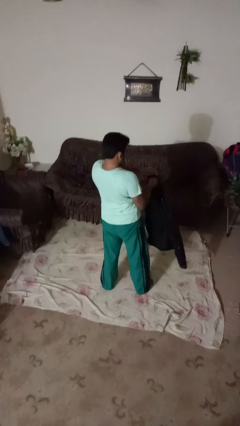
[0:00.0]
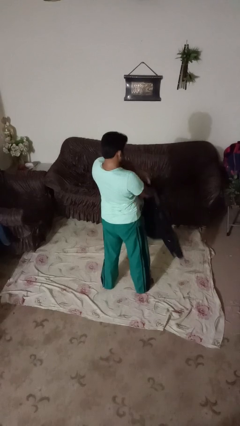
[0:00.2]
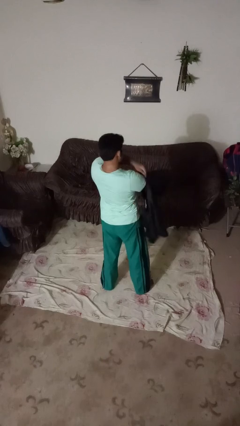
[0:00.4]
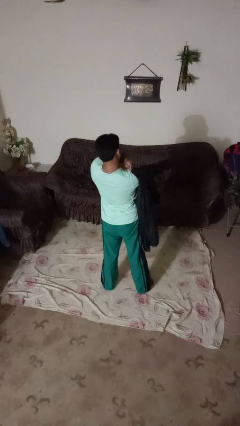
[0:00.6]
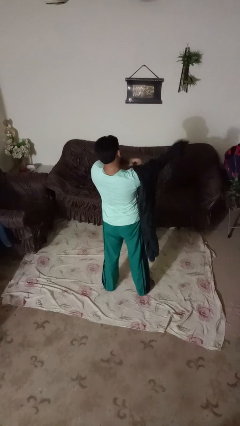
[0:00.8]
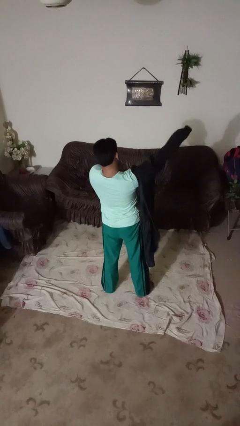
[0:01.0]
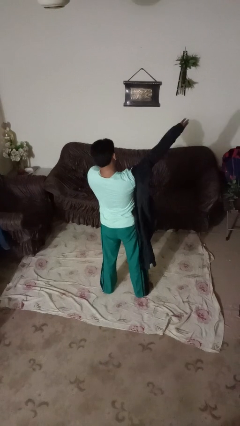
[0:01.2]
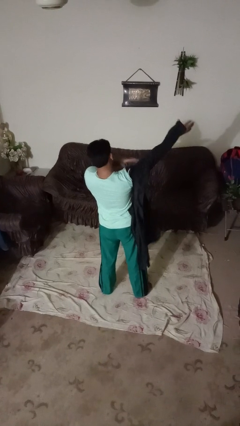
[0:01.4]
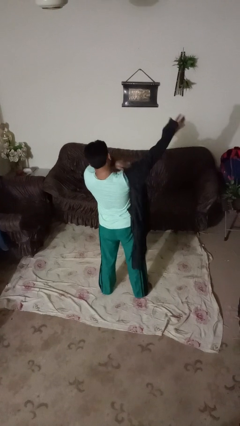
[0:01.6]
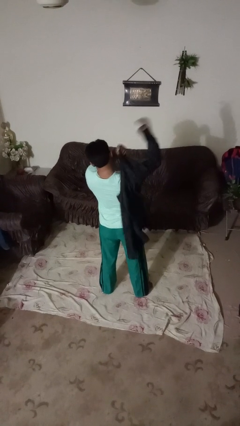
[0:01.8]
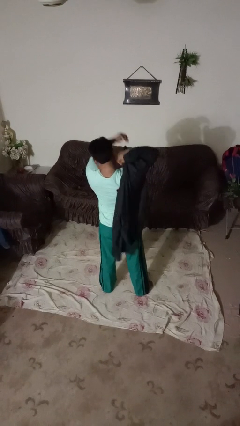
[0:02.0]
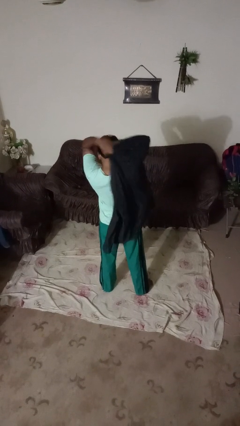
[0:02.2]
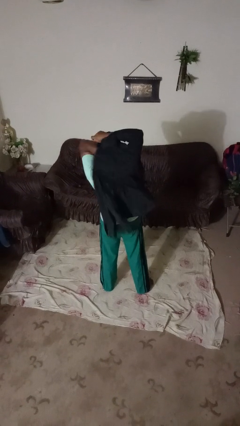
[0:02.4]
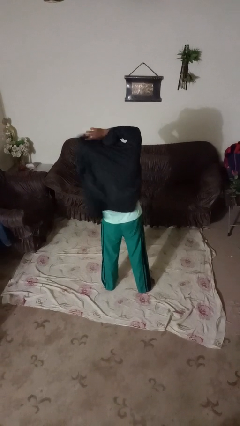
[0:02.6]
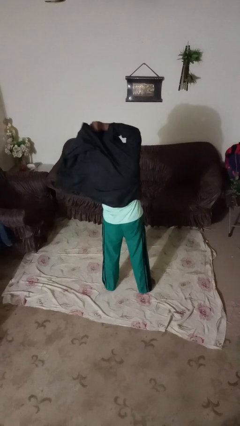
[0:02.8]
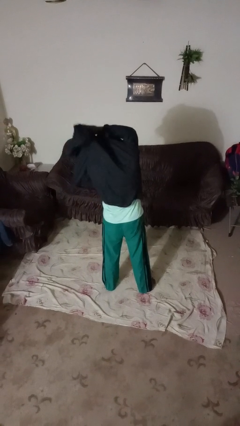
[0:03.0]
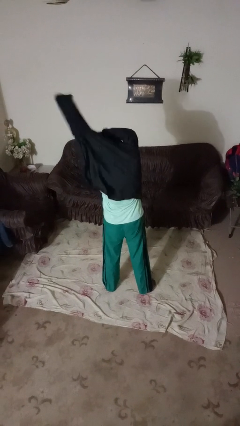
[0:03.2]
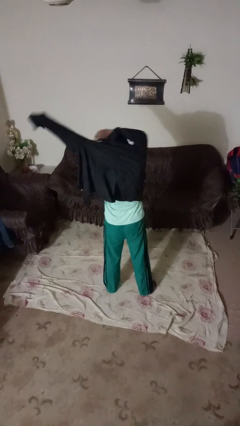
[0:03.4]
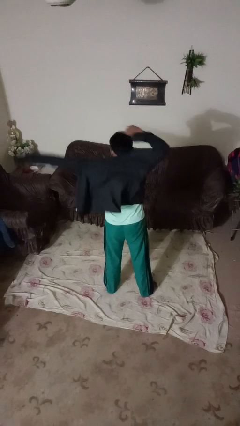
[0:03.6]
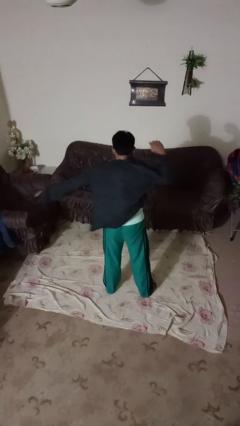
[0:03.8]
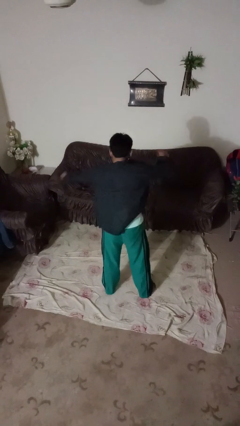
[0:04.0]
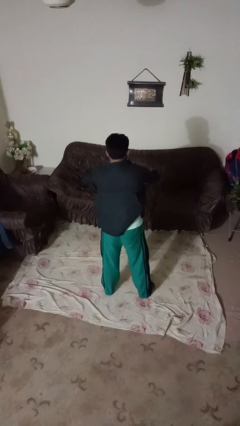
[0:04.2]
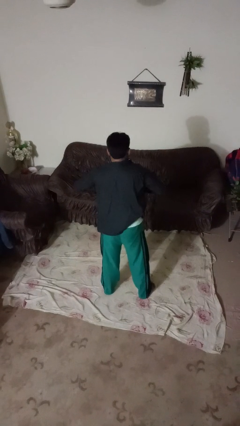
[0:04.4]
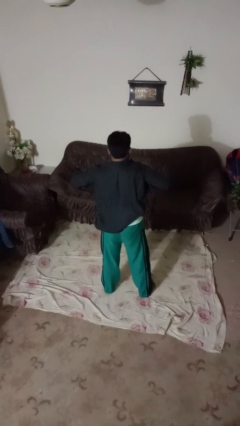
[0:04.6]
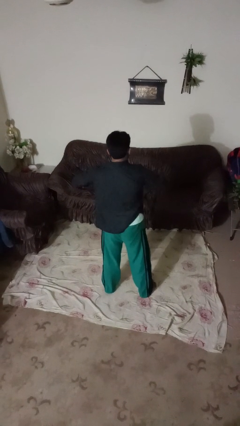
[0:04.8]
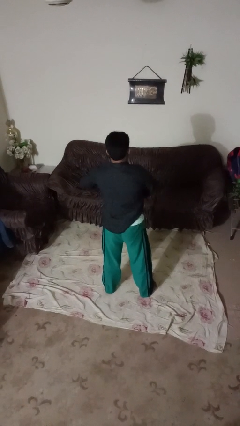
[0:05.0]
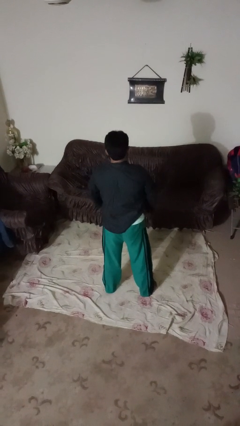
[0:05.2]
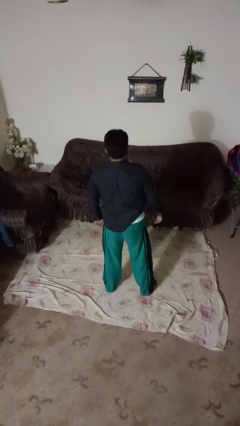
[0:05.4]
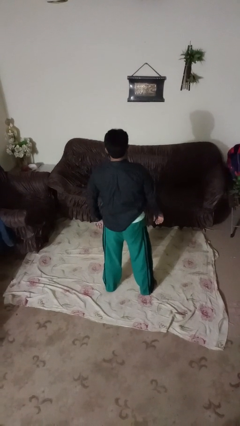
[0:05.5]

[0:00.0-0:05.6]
person puts on shirt

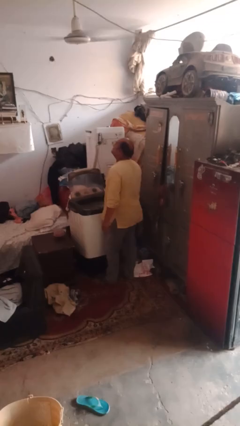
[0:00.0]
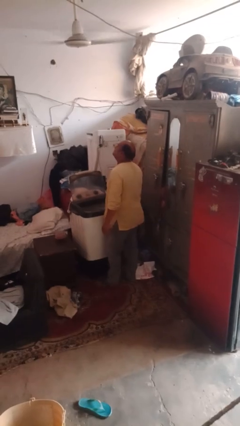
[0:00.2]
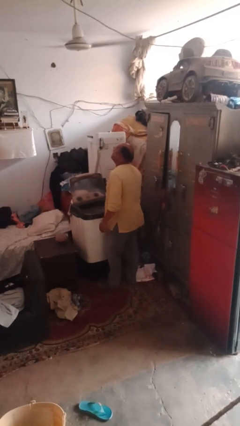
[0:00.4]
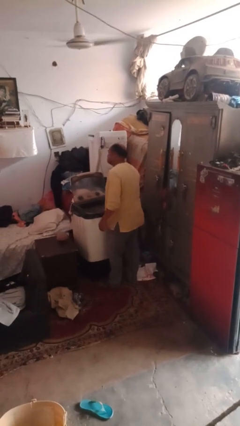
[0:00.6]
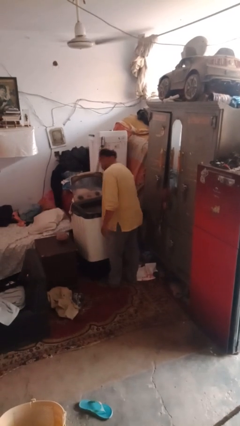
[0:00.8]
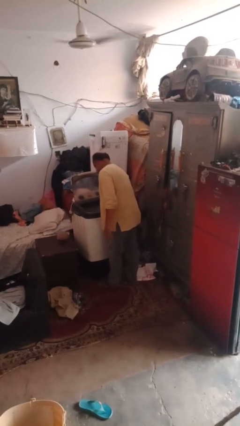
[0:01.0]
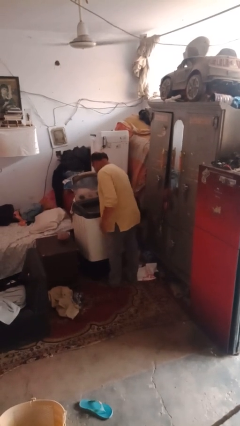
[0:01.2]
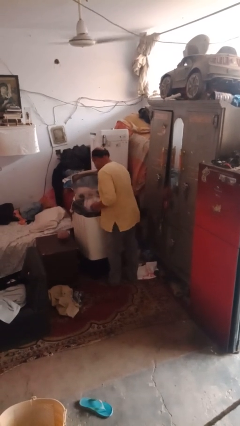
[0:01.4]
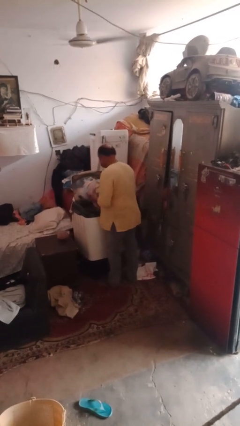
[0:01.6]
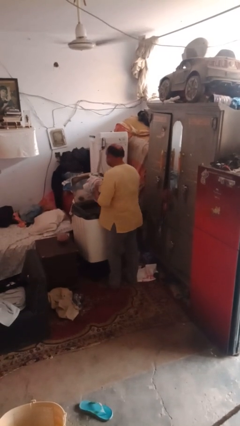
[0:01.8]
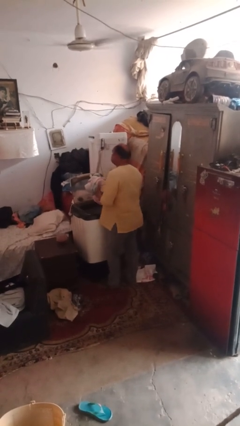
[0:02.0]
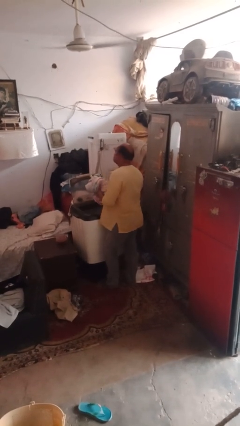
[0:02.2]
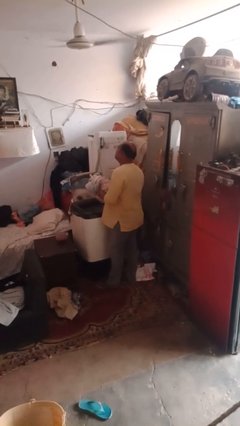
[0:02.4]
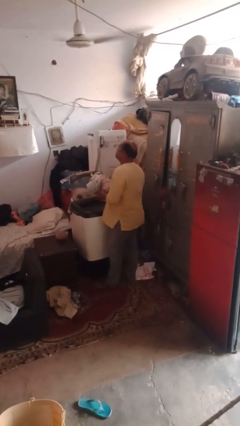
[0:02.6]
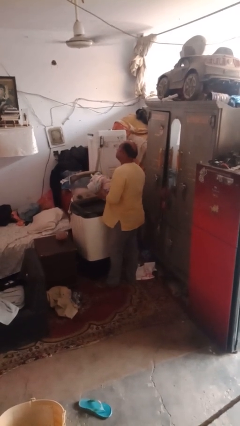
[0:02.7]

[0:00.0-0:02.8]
person unloads clotheswasher

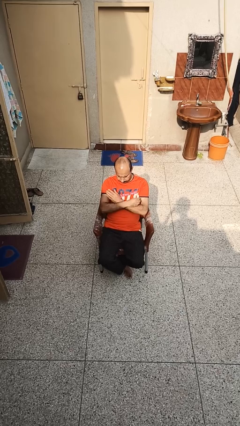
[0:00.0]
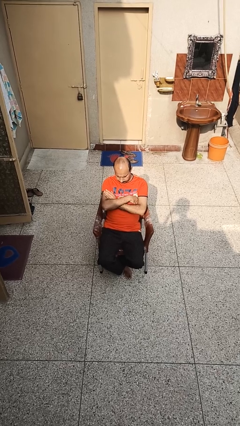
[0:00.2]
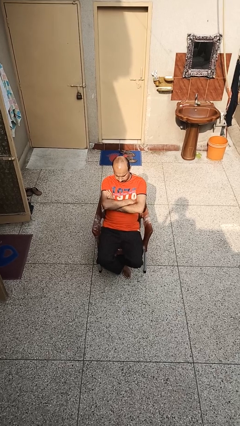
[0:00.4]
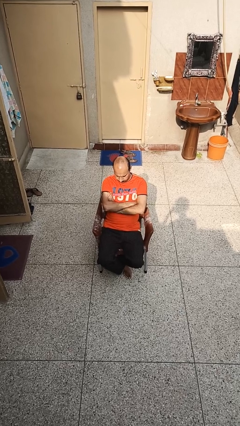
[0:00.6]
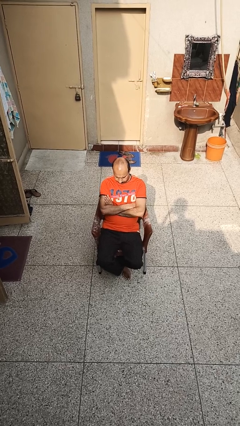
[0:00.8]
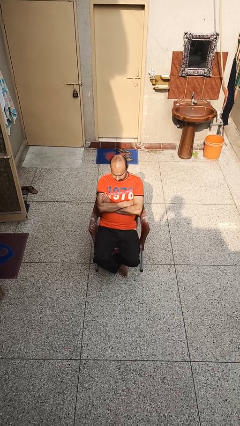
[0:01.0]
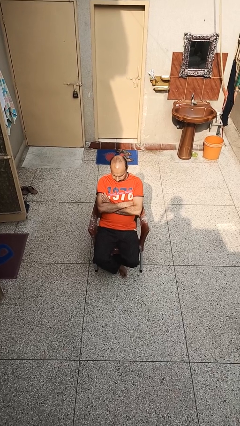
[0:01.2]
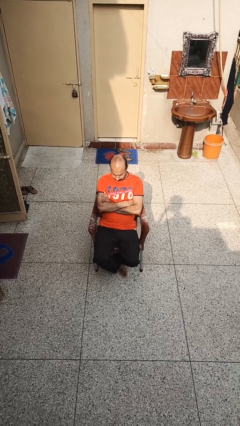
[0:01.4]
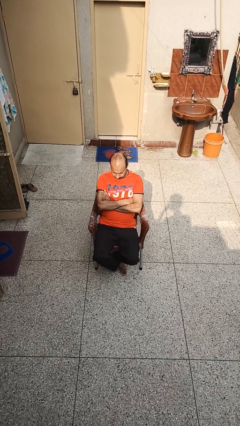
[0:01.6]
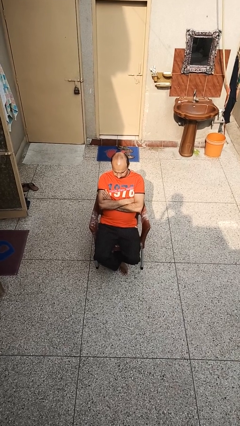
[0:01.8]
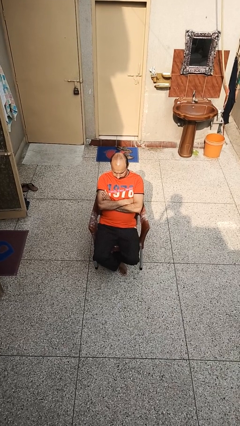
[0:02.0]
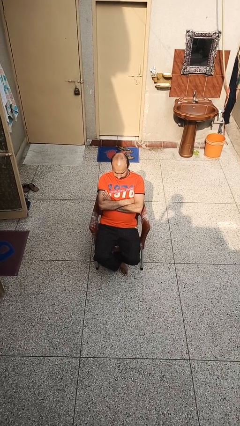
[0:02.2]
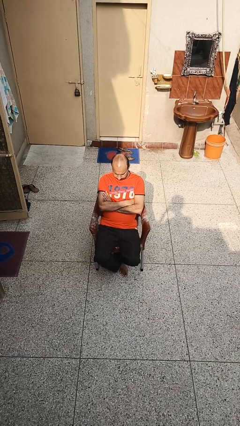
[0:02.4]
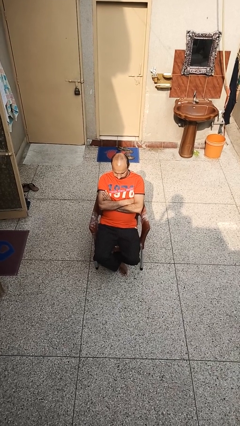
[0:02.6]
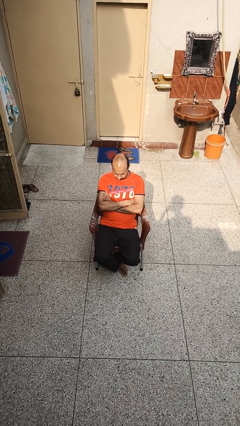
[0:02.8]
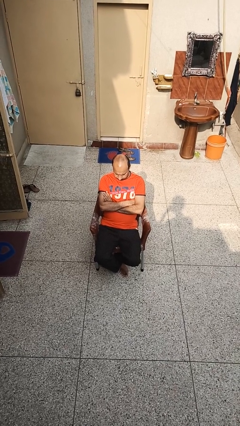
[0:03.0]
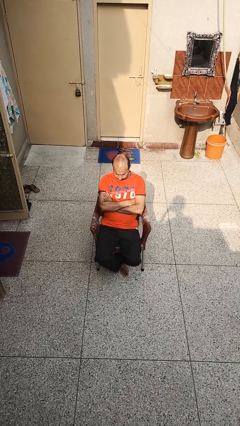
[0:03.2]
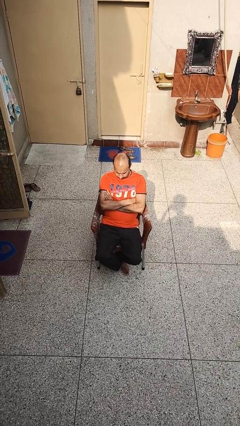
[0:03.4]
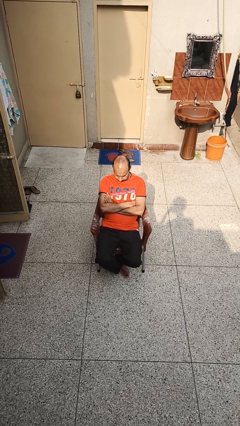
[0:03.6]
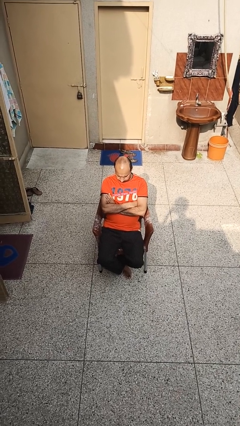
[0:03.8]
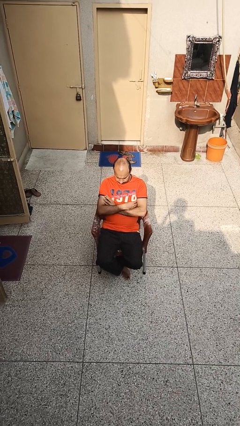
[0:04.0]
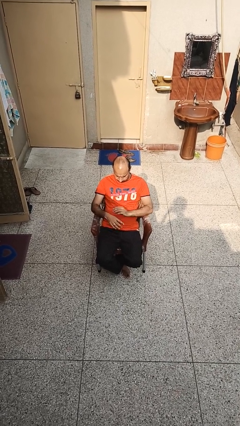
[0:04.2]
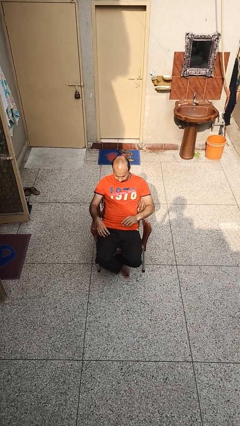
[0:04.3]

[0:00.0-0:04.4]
person crosses arms

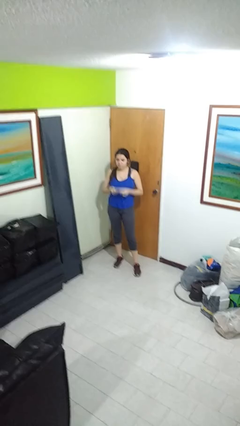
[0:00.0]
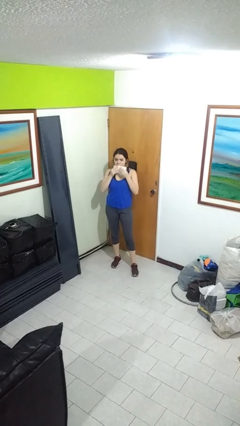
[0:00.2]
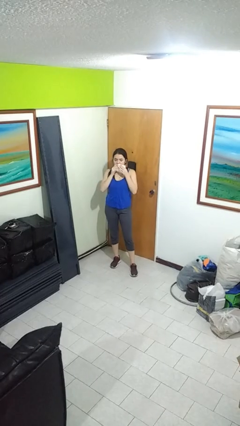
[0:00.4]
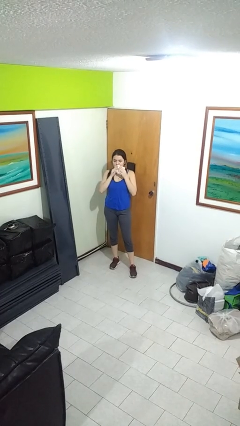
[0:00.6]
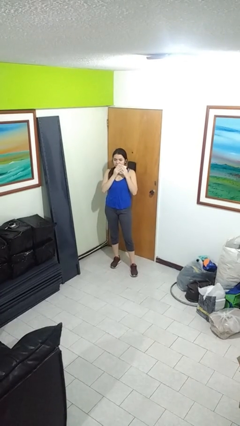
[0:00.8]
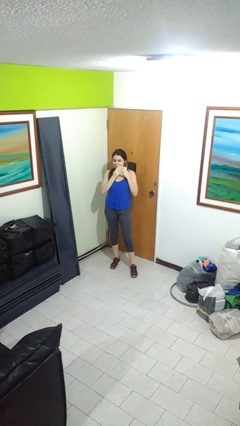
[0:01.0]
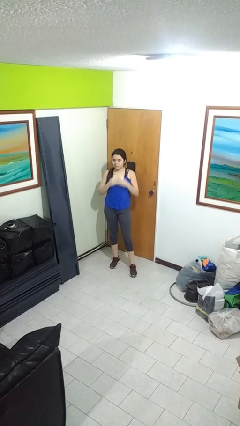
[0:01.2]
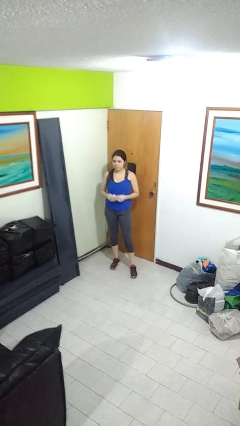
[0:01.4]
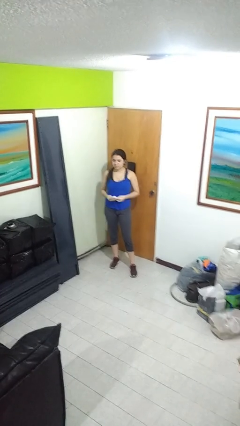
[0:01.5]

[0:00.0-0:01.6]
person wipes mouth with napkin

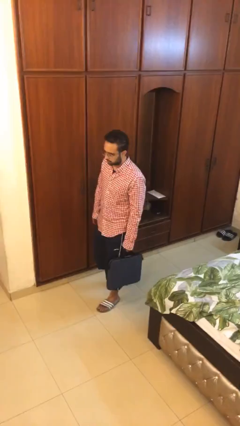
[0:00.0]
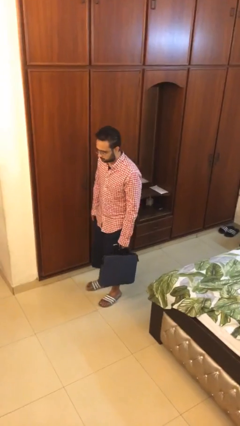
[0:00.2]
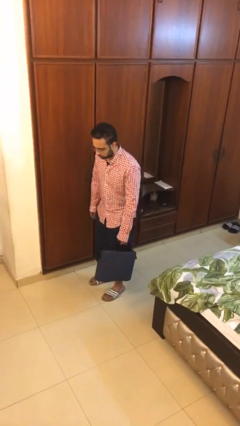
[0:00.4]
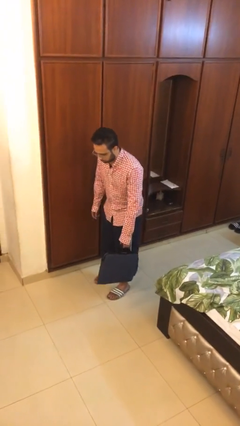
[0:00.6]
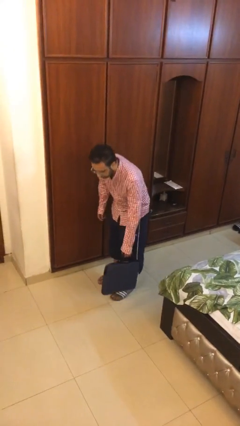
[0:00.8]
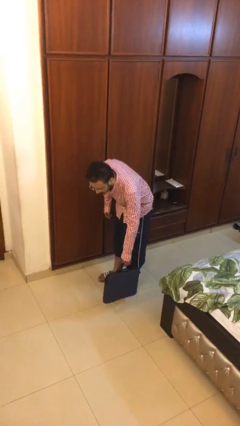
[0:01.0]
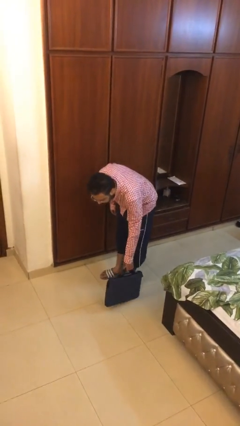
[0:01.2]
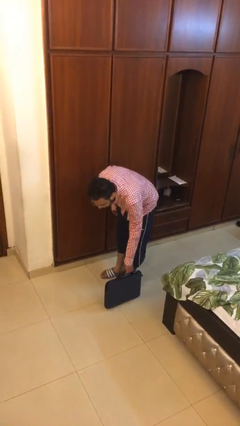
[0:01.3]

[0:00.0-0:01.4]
person puts down object on floor

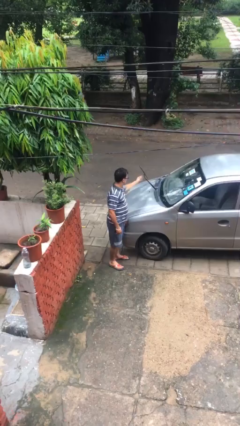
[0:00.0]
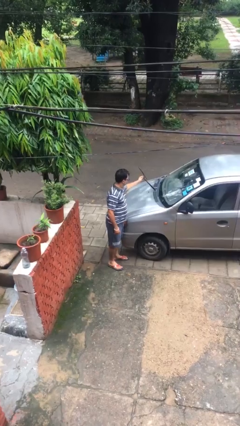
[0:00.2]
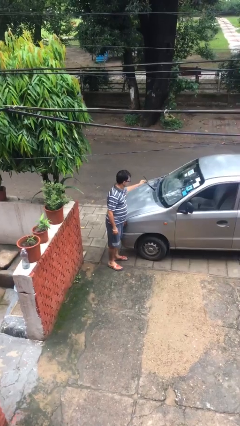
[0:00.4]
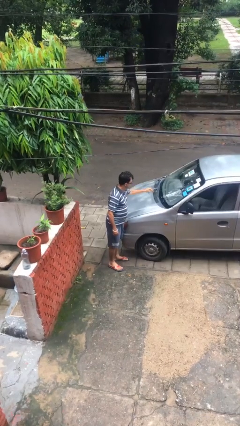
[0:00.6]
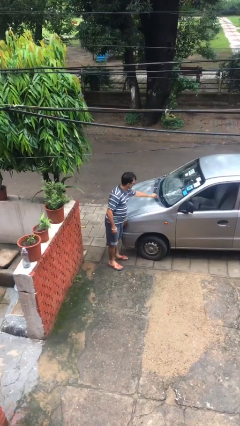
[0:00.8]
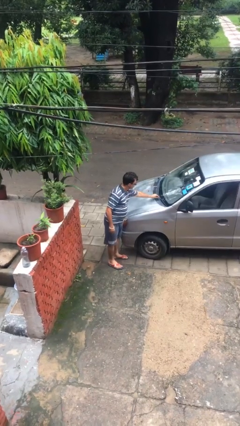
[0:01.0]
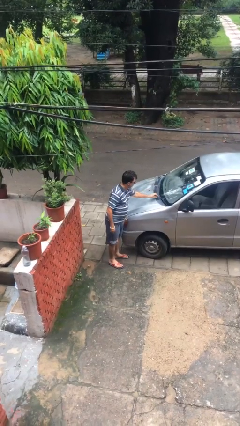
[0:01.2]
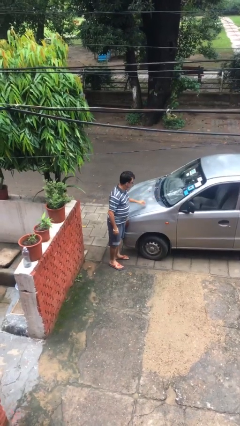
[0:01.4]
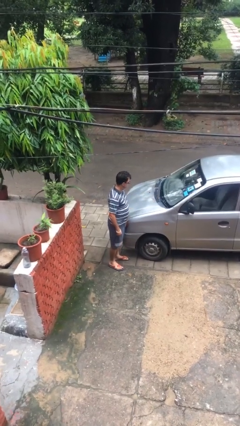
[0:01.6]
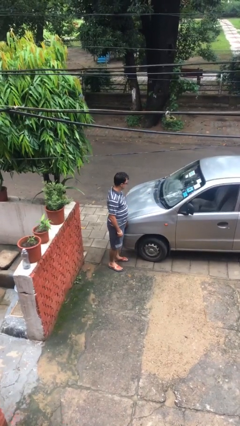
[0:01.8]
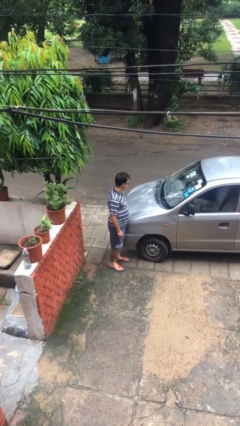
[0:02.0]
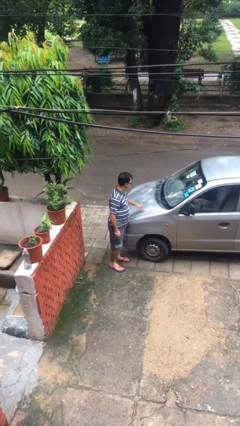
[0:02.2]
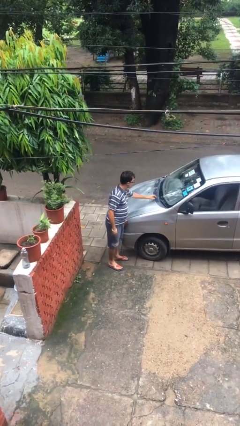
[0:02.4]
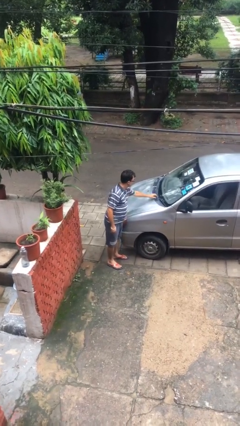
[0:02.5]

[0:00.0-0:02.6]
person flips down car wipers
